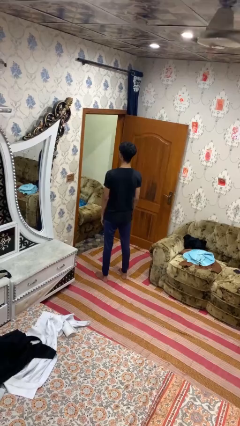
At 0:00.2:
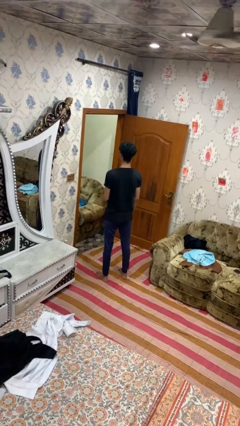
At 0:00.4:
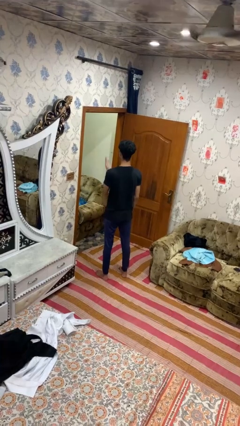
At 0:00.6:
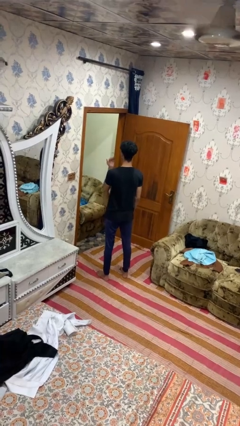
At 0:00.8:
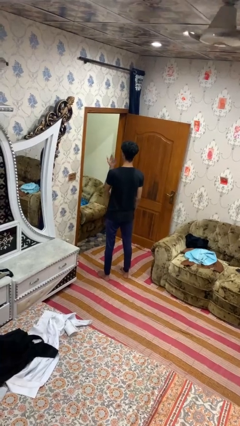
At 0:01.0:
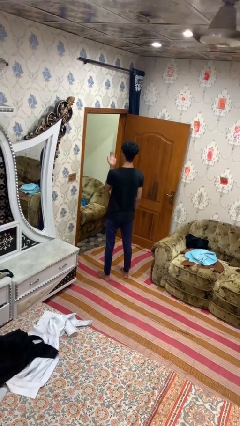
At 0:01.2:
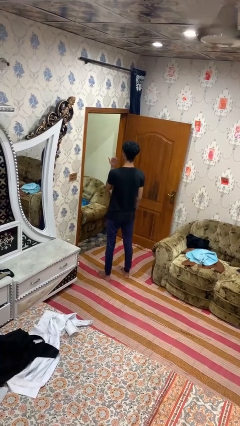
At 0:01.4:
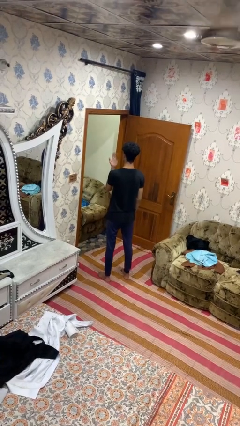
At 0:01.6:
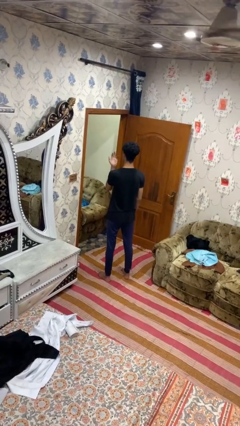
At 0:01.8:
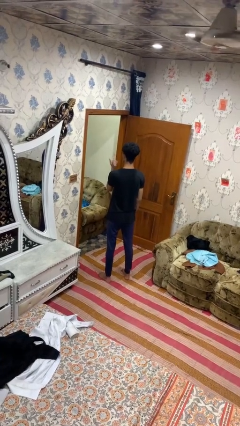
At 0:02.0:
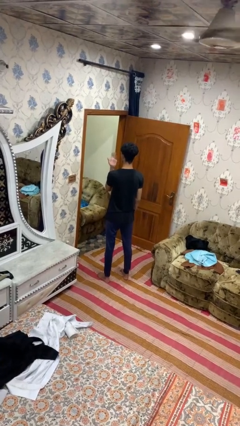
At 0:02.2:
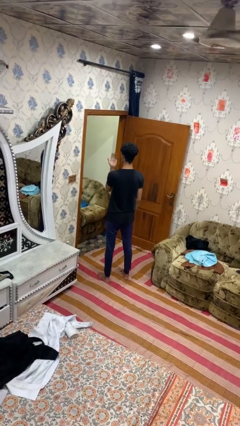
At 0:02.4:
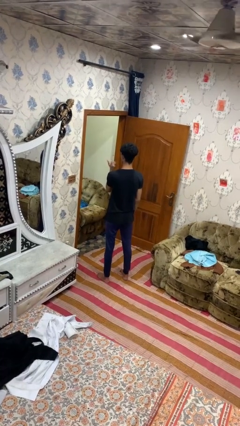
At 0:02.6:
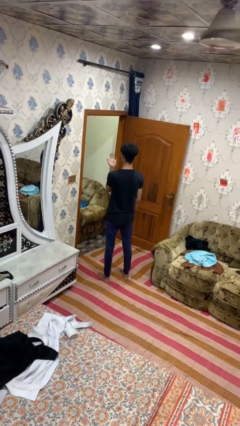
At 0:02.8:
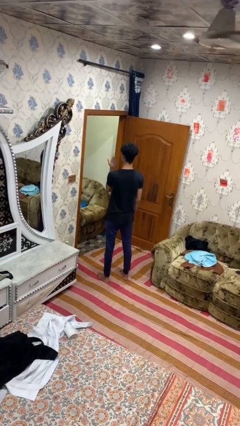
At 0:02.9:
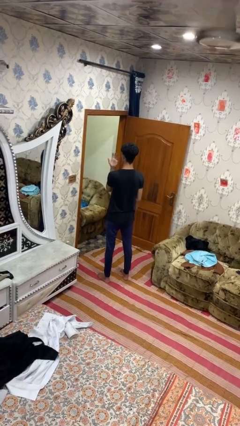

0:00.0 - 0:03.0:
person gestures listen closely

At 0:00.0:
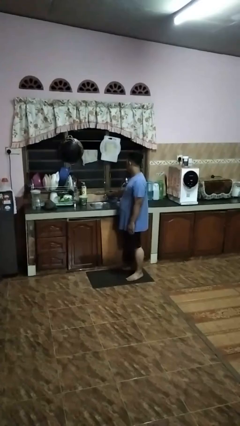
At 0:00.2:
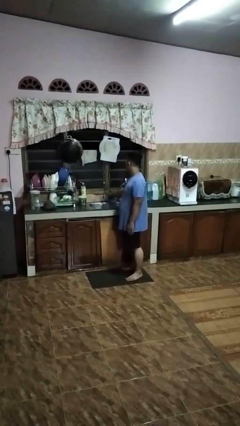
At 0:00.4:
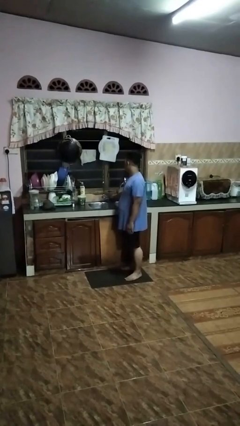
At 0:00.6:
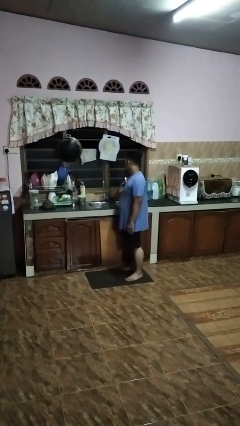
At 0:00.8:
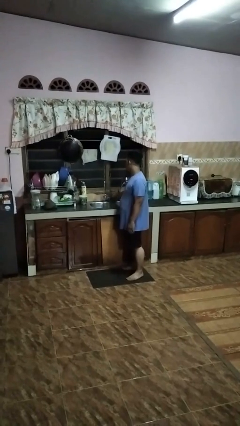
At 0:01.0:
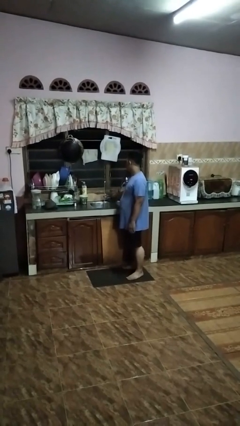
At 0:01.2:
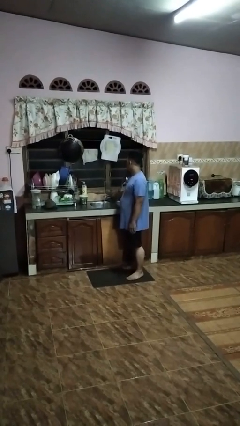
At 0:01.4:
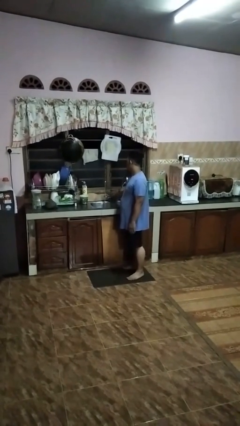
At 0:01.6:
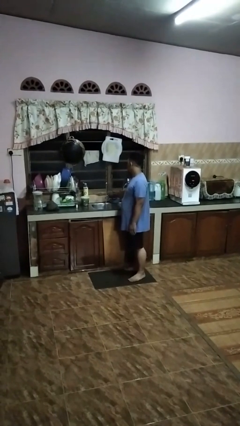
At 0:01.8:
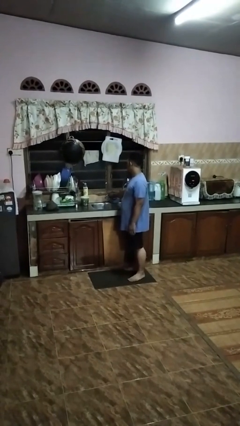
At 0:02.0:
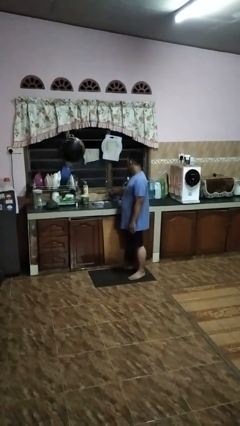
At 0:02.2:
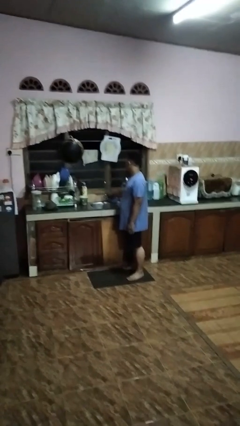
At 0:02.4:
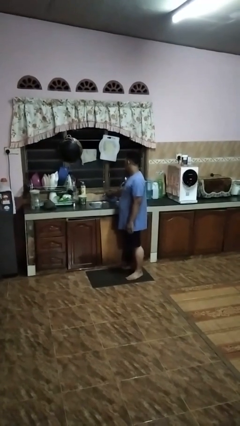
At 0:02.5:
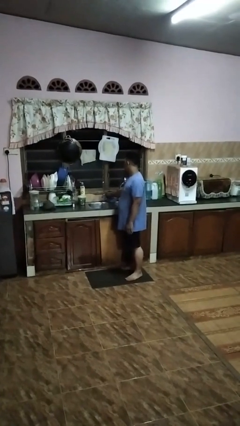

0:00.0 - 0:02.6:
person turns on faucet

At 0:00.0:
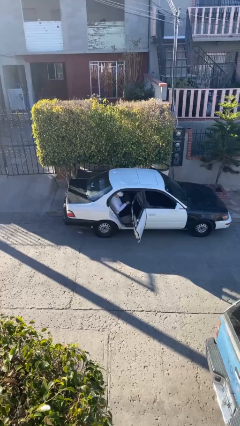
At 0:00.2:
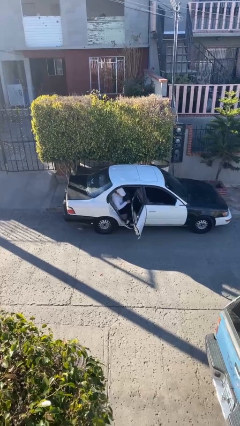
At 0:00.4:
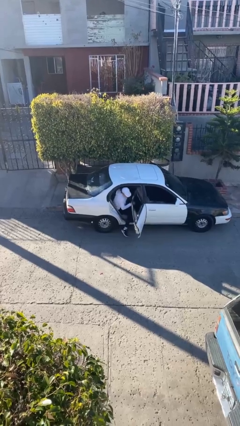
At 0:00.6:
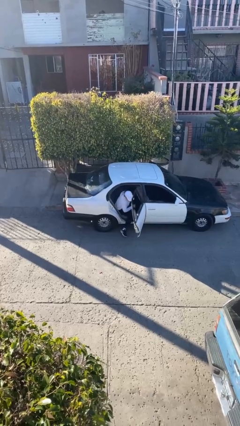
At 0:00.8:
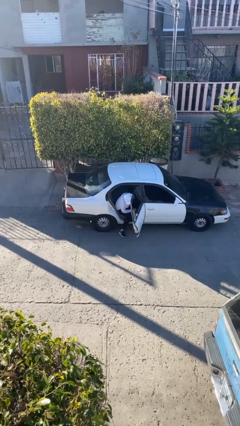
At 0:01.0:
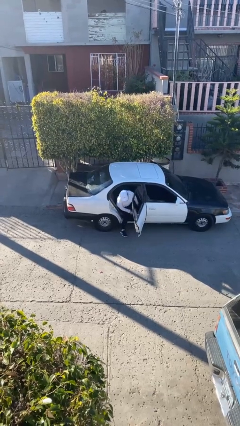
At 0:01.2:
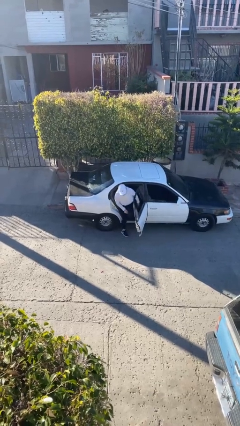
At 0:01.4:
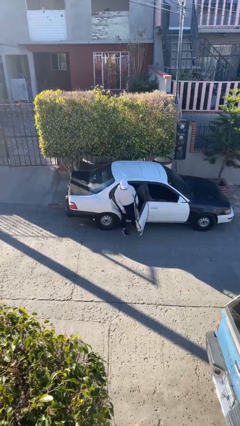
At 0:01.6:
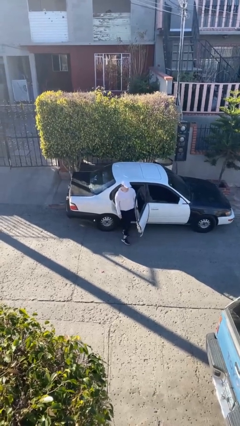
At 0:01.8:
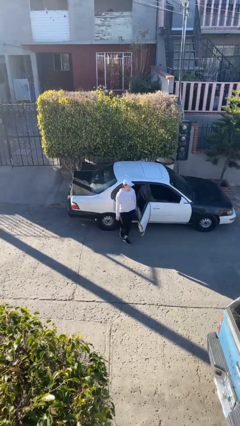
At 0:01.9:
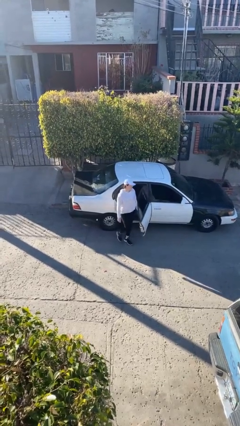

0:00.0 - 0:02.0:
person exits car

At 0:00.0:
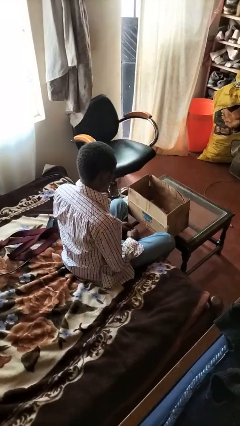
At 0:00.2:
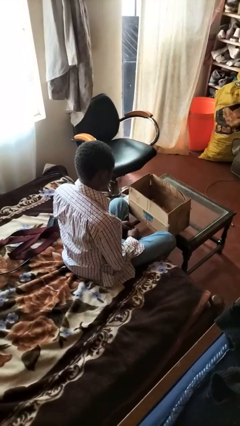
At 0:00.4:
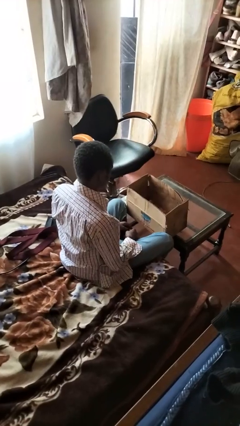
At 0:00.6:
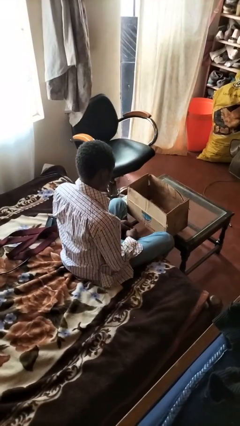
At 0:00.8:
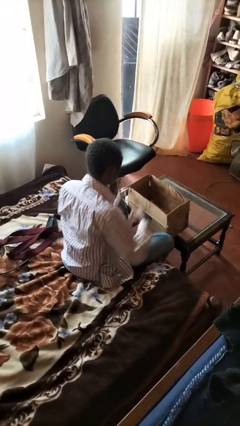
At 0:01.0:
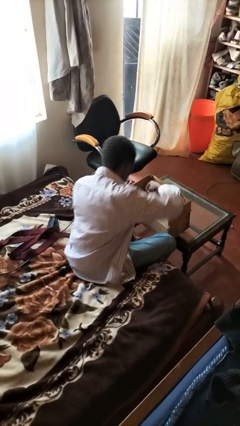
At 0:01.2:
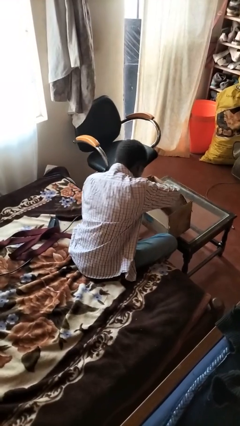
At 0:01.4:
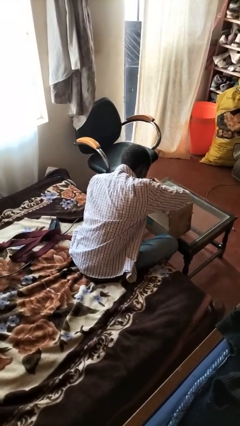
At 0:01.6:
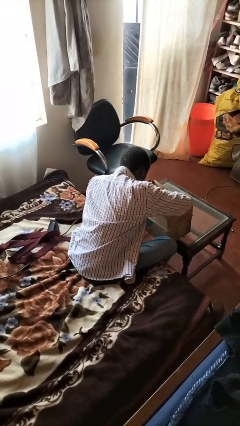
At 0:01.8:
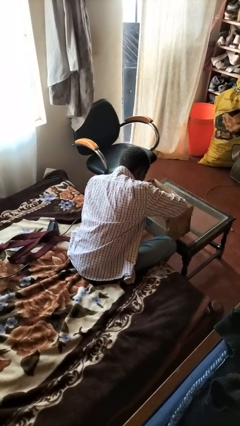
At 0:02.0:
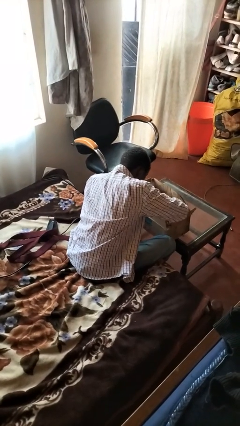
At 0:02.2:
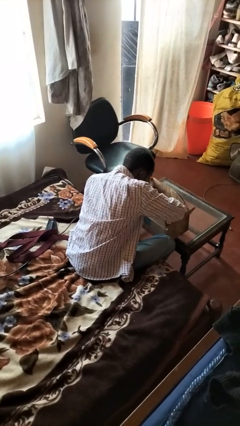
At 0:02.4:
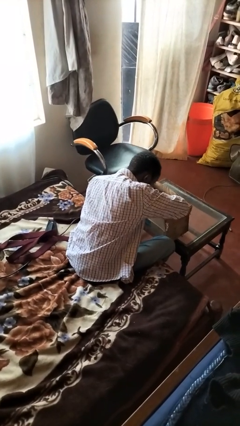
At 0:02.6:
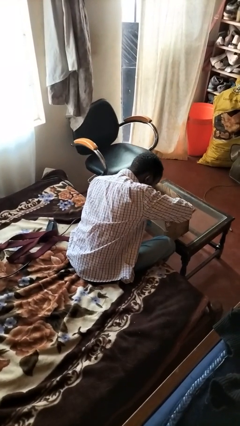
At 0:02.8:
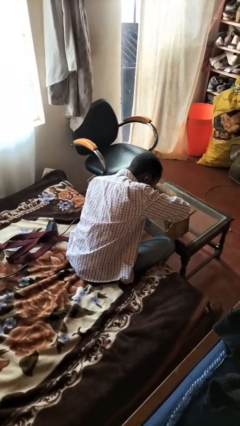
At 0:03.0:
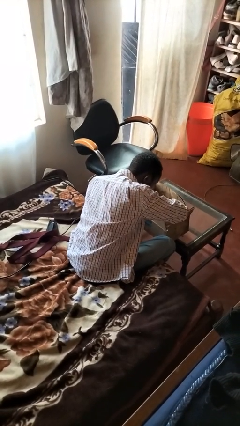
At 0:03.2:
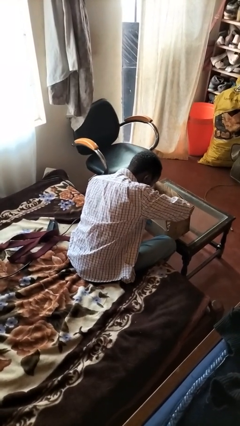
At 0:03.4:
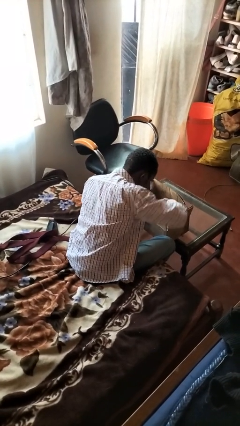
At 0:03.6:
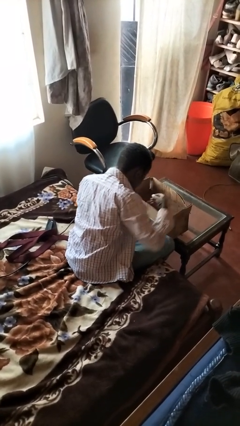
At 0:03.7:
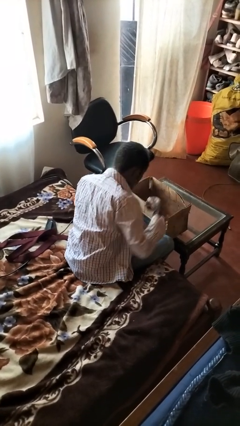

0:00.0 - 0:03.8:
person searches in box

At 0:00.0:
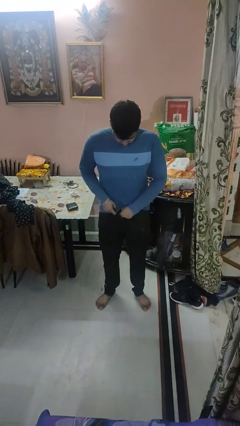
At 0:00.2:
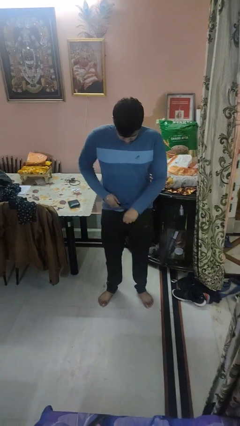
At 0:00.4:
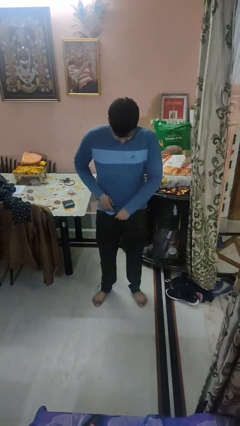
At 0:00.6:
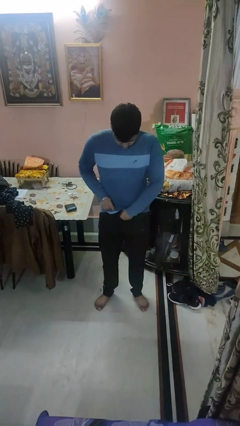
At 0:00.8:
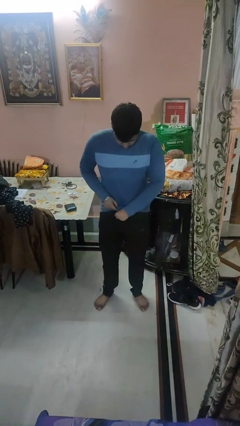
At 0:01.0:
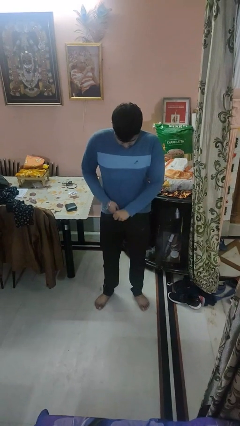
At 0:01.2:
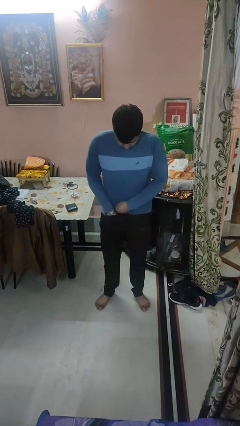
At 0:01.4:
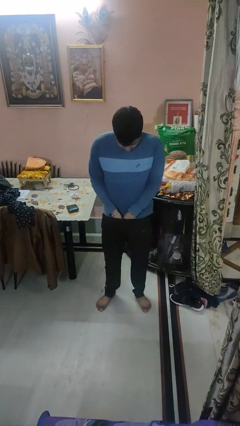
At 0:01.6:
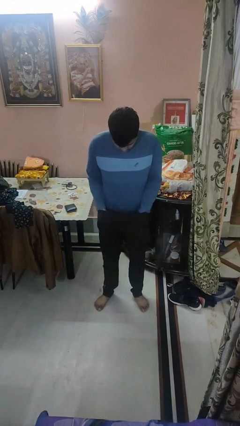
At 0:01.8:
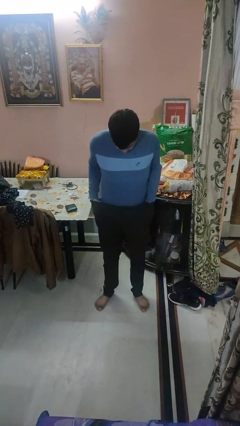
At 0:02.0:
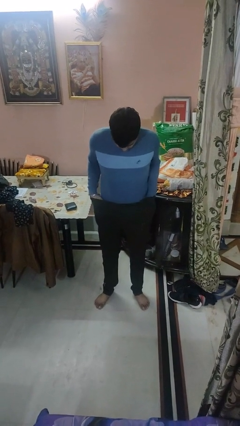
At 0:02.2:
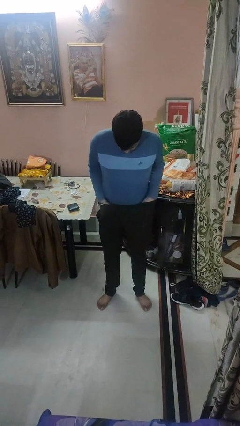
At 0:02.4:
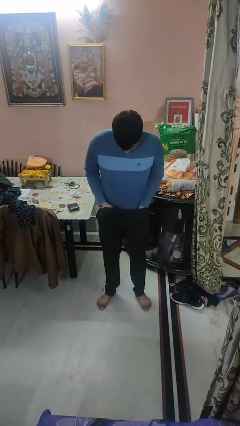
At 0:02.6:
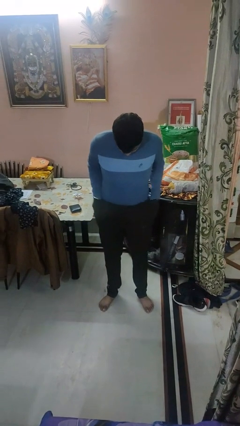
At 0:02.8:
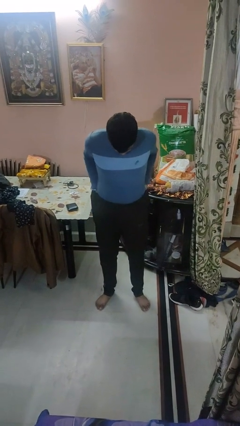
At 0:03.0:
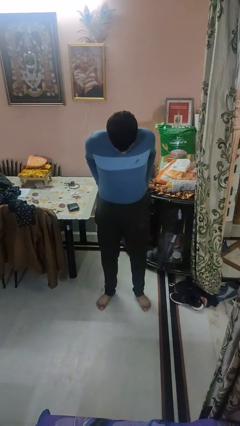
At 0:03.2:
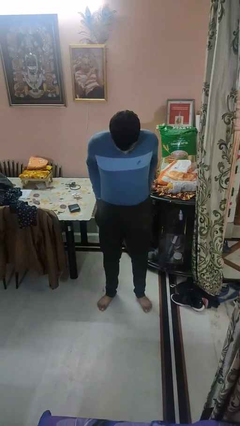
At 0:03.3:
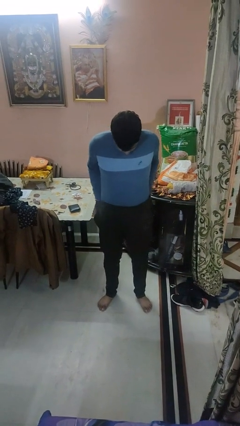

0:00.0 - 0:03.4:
person tucks in shirt

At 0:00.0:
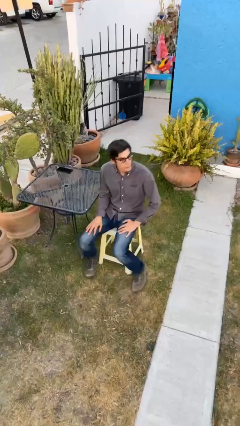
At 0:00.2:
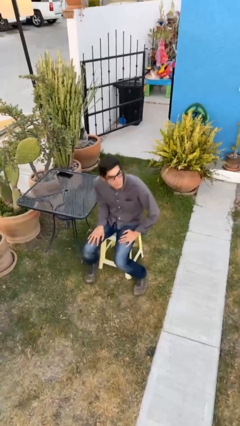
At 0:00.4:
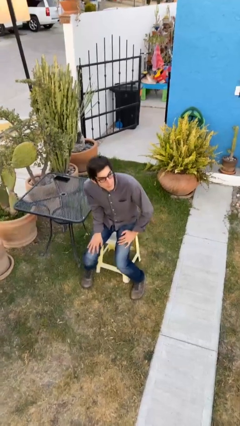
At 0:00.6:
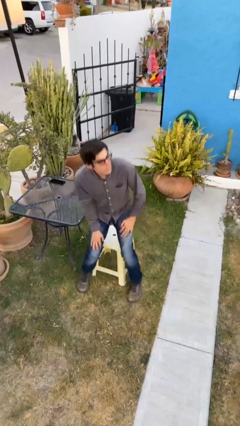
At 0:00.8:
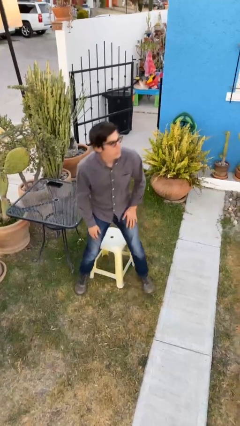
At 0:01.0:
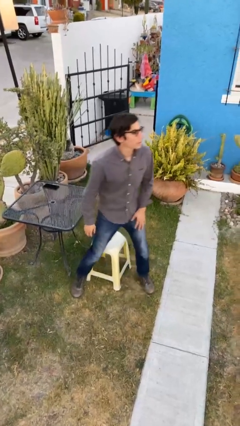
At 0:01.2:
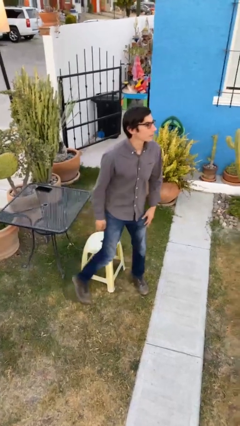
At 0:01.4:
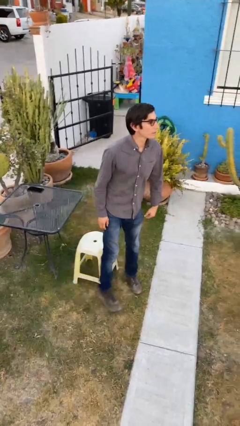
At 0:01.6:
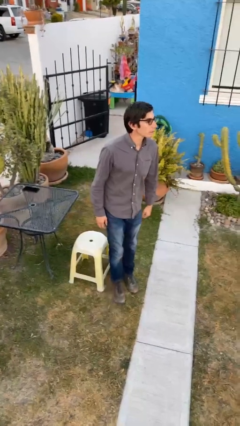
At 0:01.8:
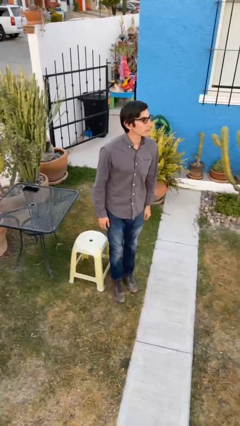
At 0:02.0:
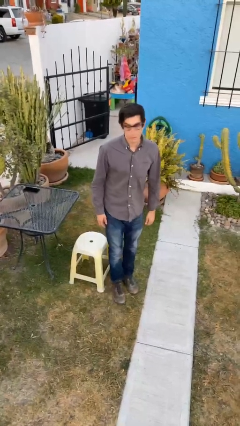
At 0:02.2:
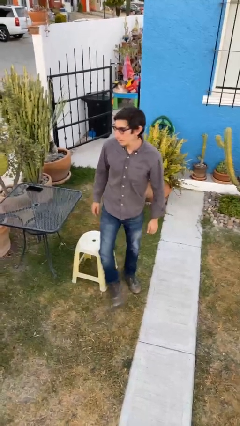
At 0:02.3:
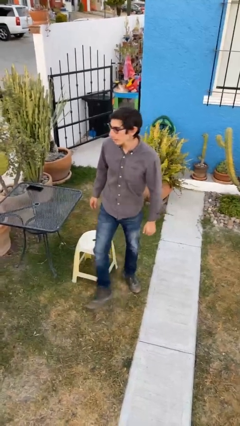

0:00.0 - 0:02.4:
person stands up
